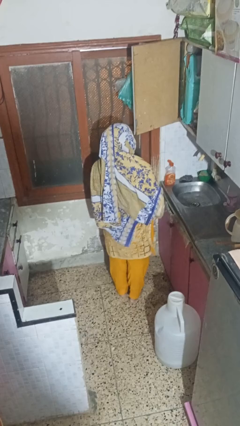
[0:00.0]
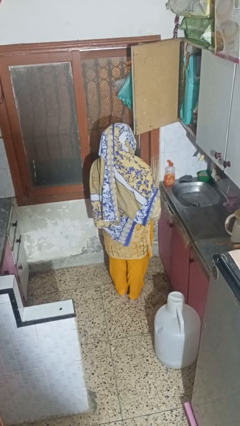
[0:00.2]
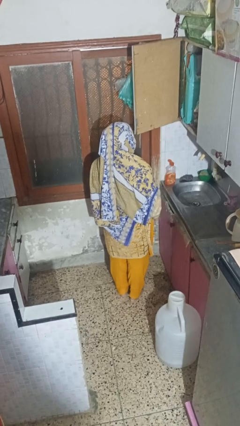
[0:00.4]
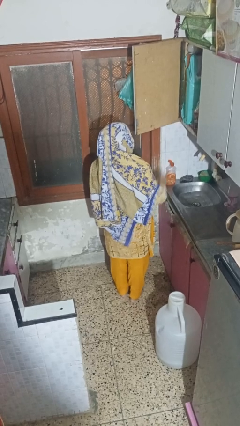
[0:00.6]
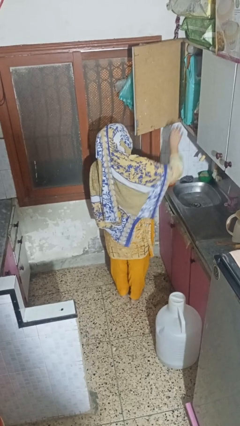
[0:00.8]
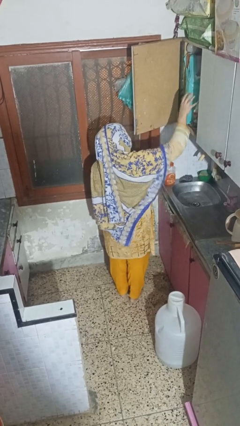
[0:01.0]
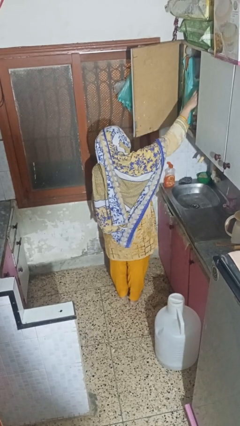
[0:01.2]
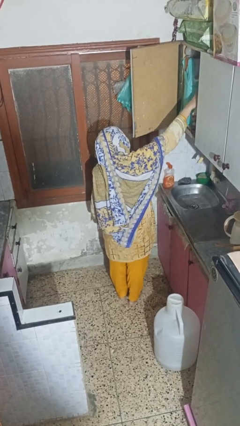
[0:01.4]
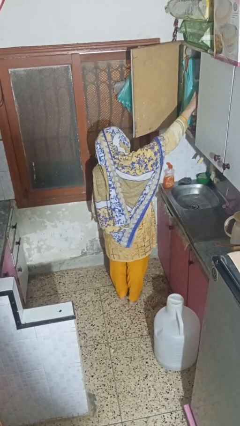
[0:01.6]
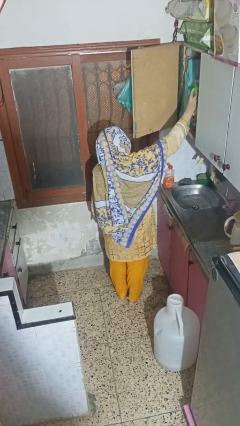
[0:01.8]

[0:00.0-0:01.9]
person takes object from cabinet

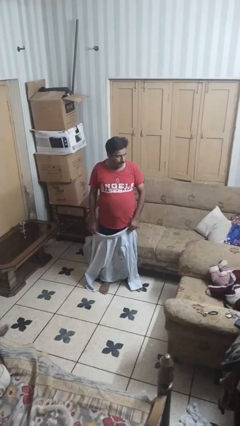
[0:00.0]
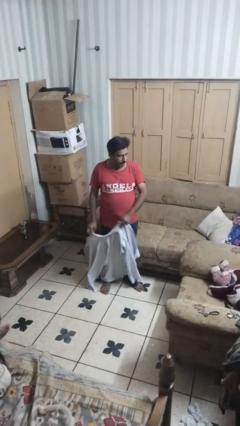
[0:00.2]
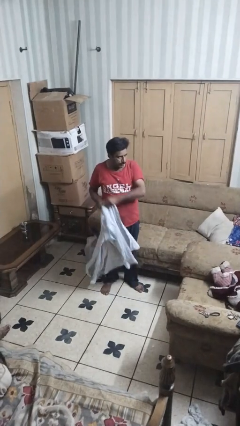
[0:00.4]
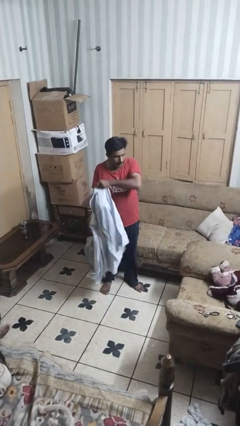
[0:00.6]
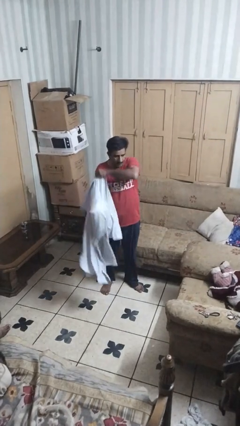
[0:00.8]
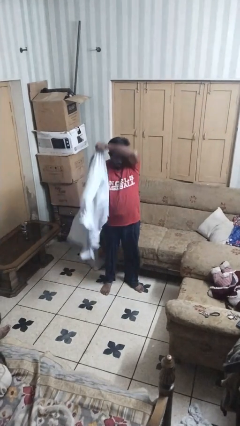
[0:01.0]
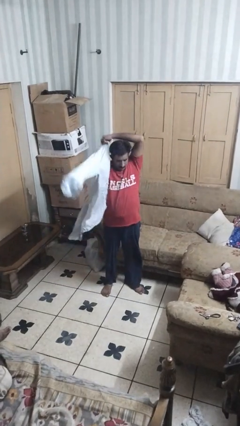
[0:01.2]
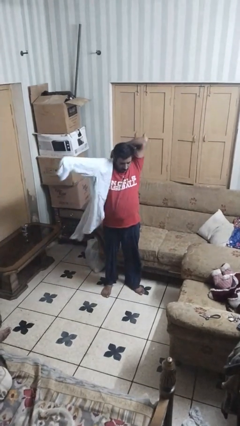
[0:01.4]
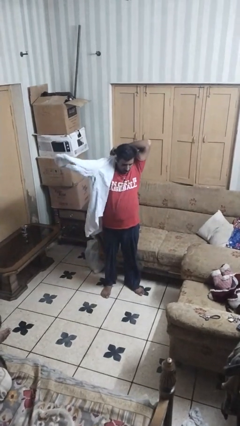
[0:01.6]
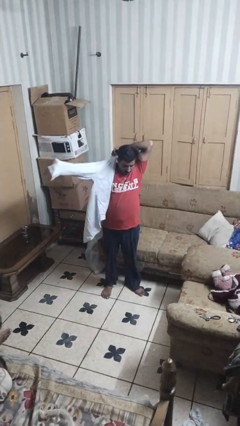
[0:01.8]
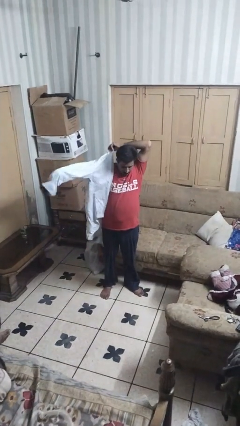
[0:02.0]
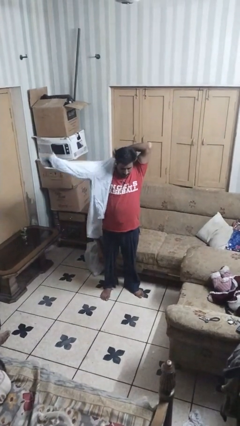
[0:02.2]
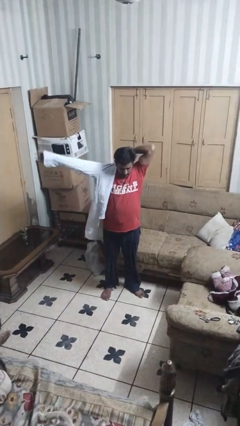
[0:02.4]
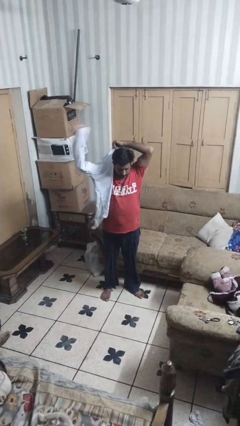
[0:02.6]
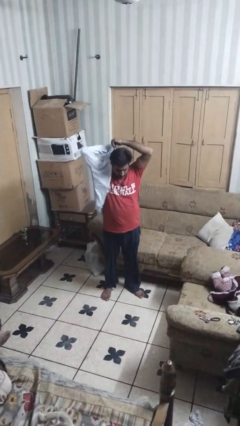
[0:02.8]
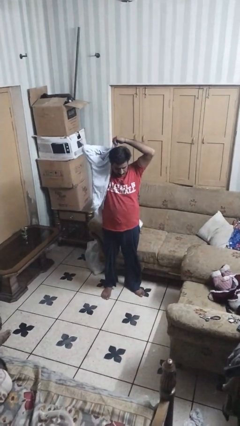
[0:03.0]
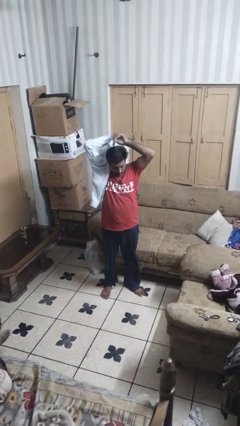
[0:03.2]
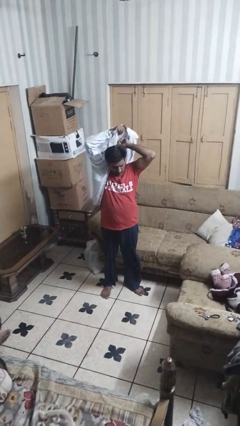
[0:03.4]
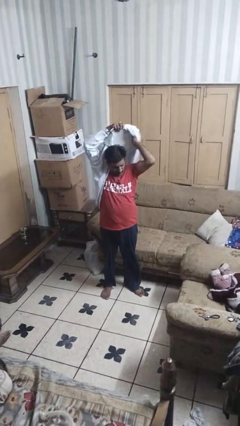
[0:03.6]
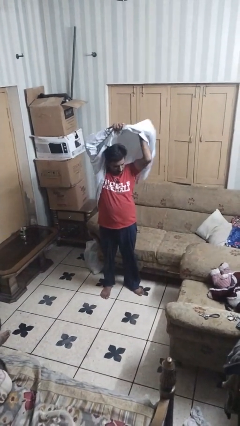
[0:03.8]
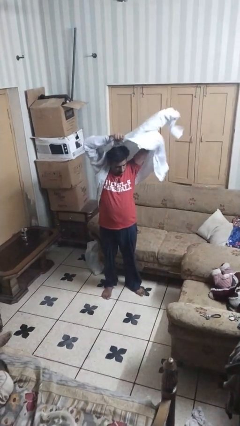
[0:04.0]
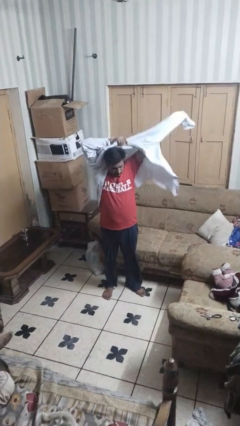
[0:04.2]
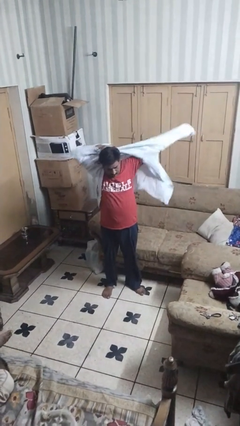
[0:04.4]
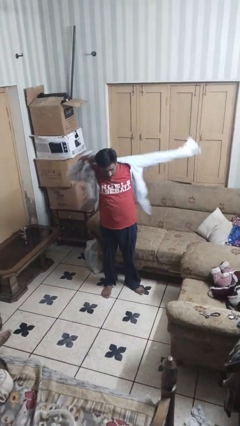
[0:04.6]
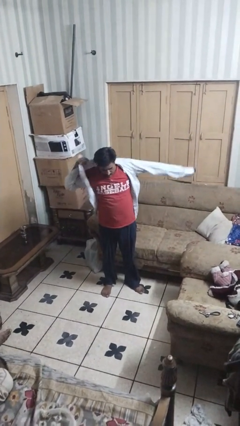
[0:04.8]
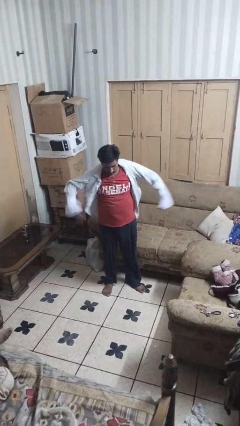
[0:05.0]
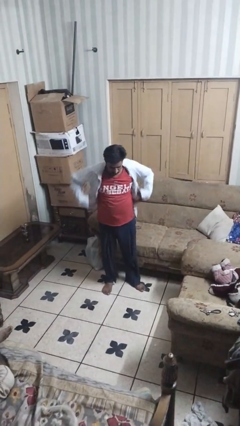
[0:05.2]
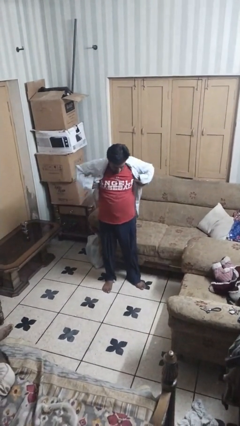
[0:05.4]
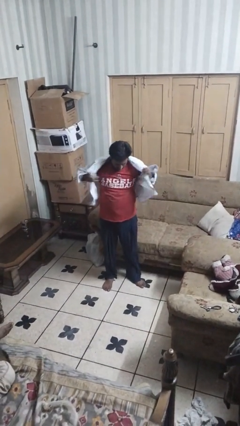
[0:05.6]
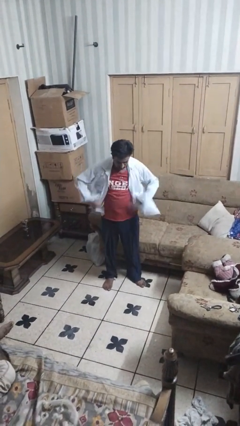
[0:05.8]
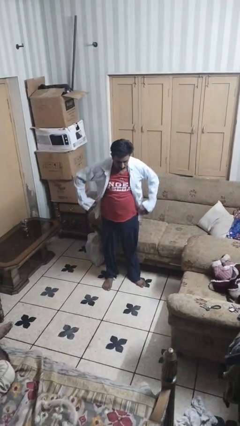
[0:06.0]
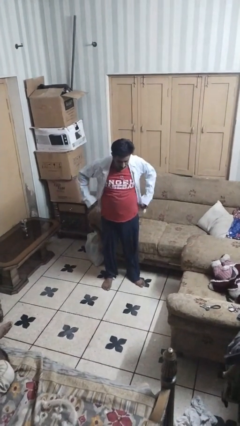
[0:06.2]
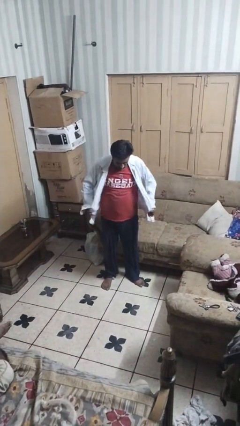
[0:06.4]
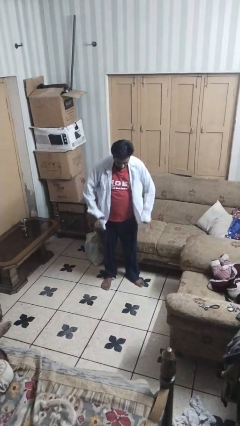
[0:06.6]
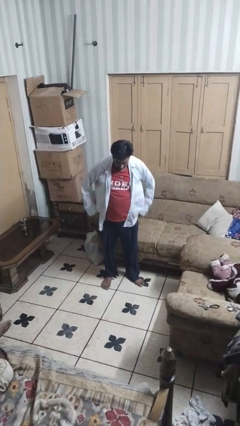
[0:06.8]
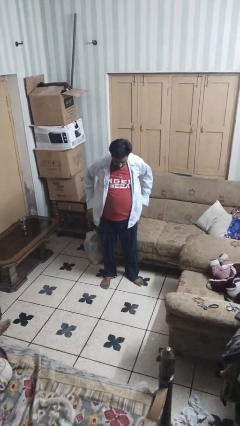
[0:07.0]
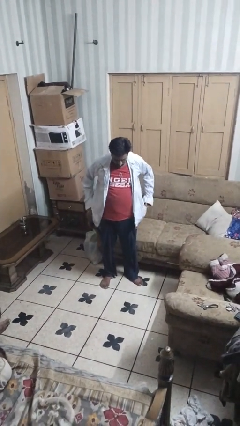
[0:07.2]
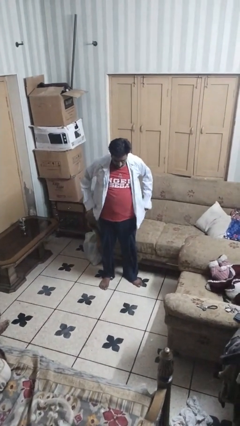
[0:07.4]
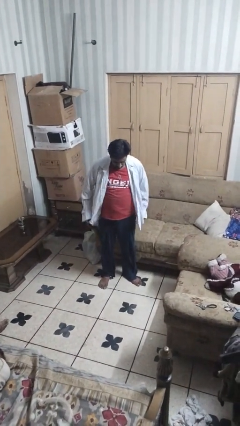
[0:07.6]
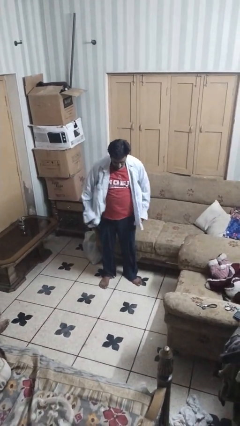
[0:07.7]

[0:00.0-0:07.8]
person puts on shirt

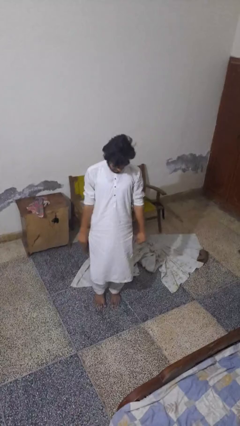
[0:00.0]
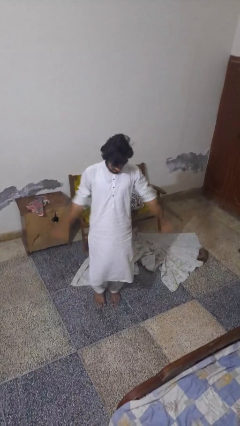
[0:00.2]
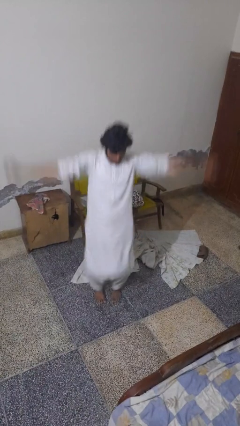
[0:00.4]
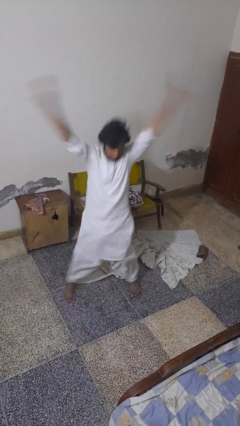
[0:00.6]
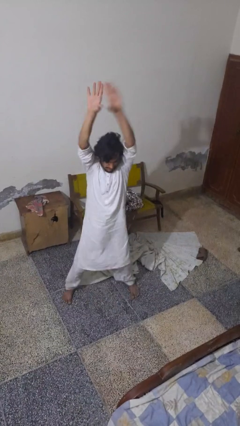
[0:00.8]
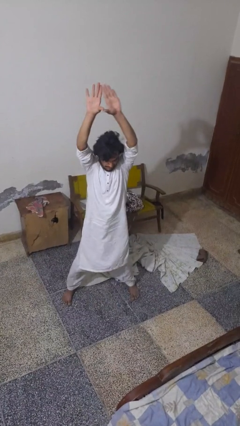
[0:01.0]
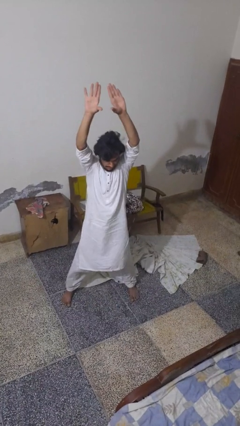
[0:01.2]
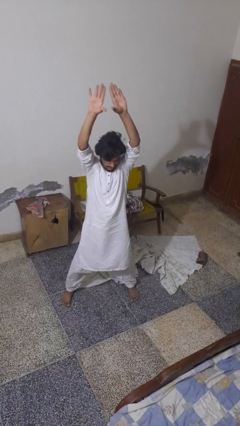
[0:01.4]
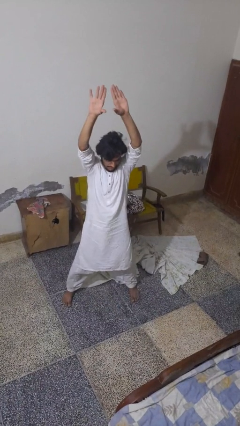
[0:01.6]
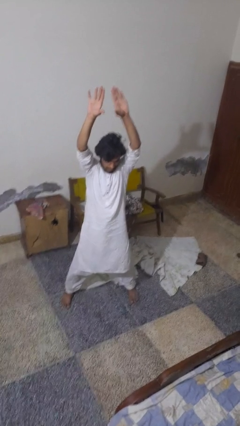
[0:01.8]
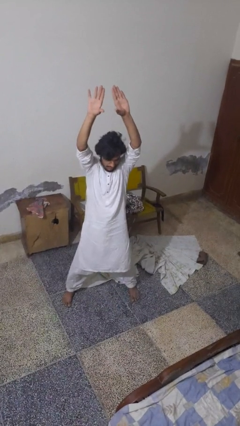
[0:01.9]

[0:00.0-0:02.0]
person exercises with jumping jacks

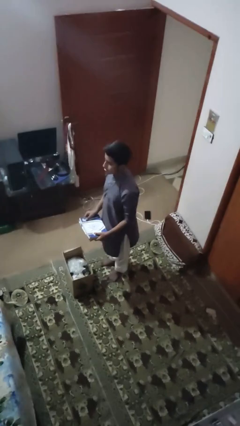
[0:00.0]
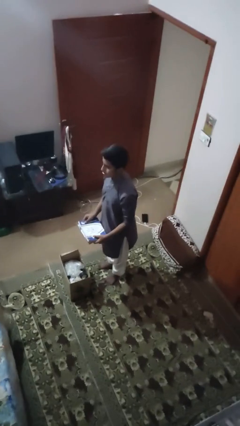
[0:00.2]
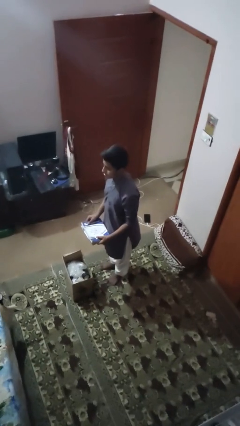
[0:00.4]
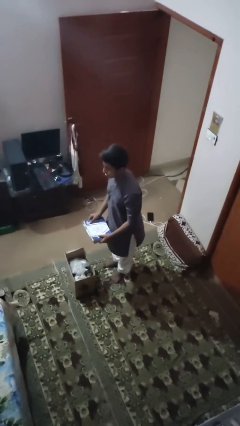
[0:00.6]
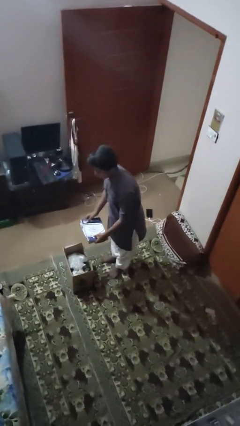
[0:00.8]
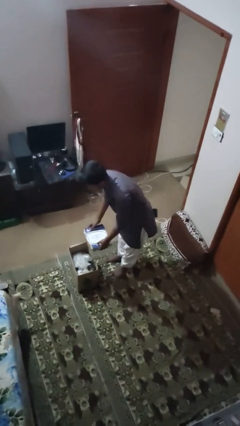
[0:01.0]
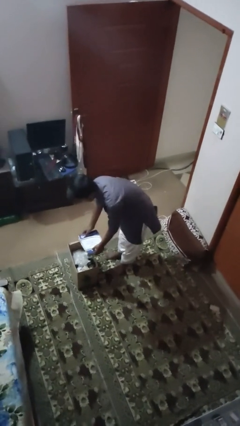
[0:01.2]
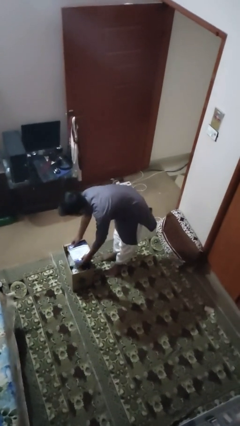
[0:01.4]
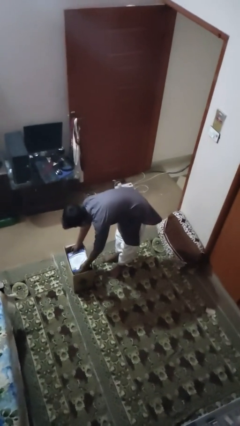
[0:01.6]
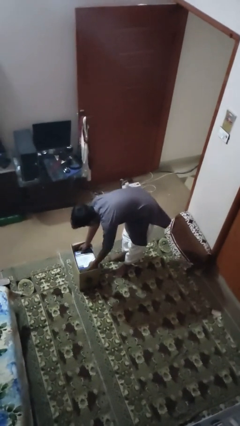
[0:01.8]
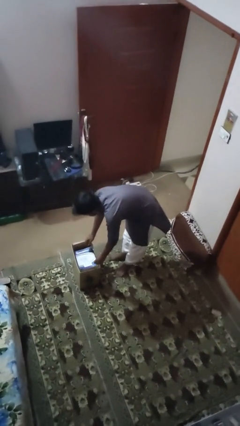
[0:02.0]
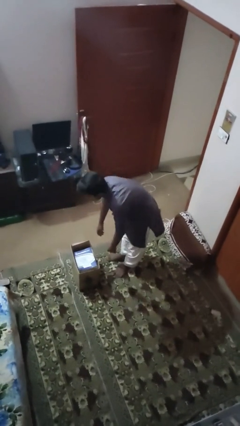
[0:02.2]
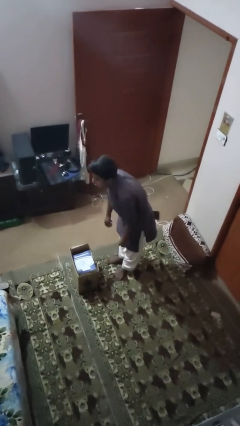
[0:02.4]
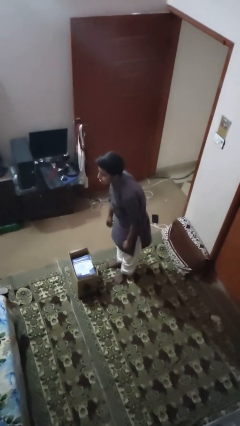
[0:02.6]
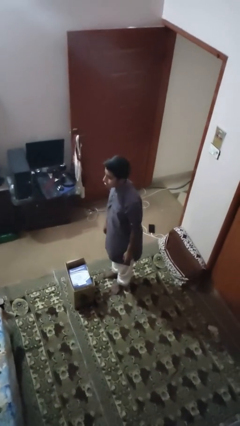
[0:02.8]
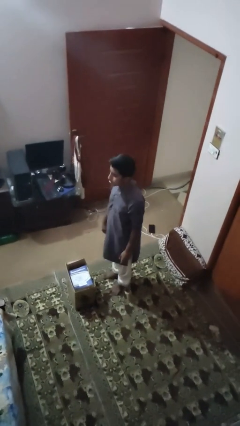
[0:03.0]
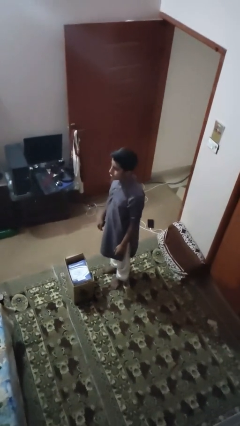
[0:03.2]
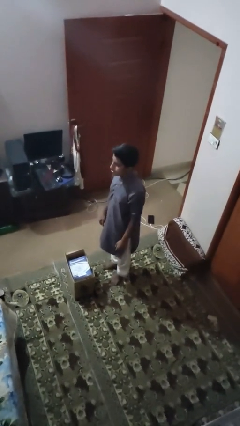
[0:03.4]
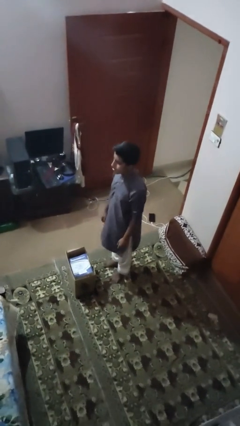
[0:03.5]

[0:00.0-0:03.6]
person puts object into box

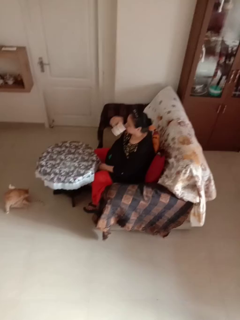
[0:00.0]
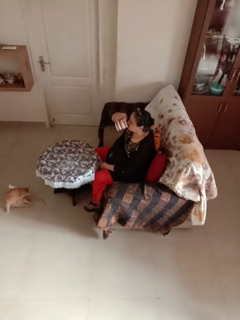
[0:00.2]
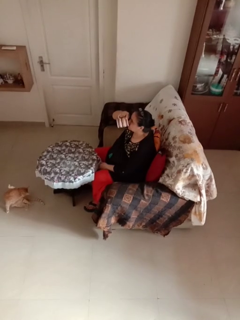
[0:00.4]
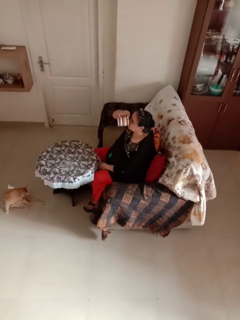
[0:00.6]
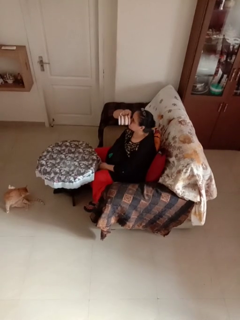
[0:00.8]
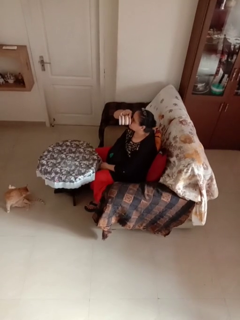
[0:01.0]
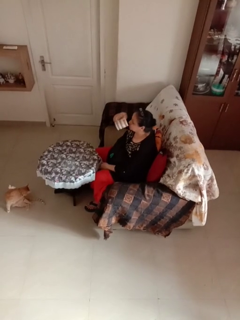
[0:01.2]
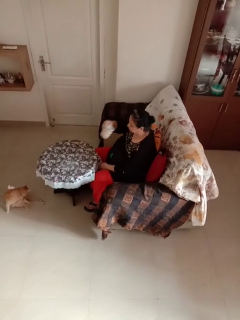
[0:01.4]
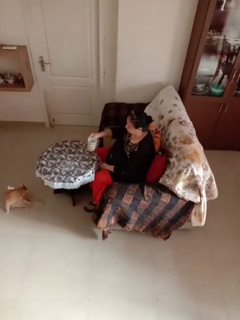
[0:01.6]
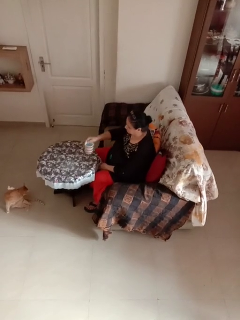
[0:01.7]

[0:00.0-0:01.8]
person drinks from mug

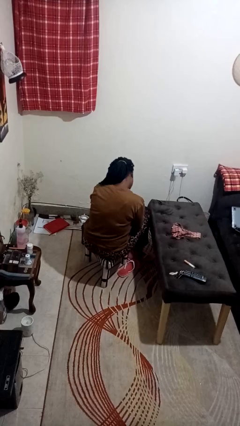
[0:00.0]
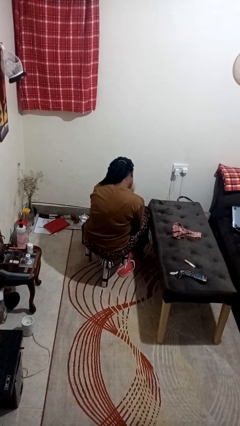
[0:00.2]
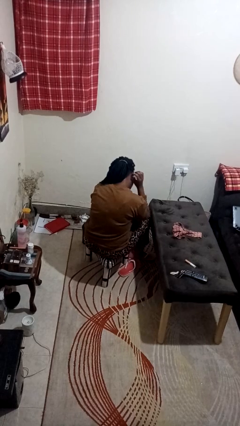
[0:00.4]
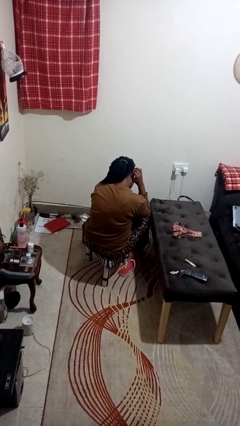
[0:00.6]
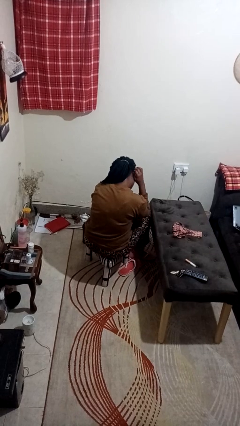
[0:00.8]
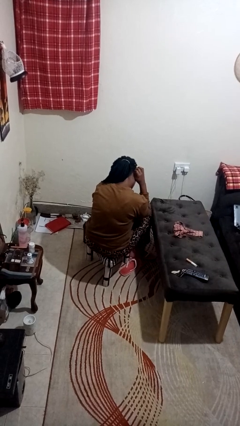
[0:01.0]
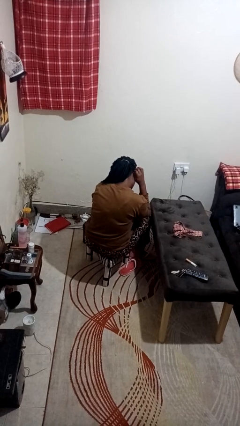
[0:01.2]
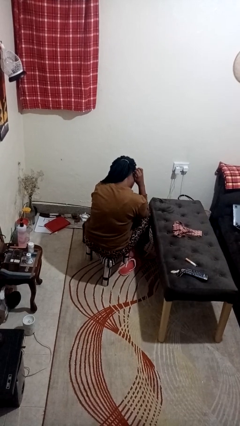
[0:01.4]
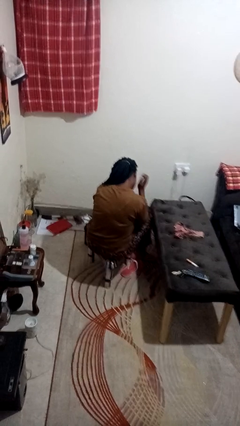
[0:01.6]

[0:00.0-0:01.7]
person gestures listen closely
